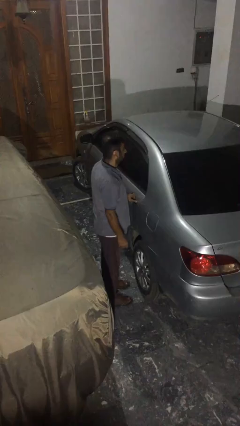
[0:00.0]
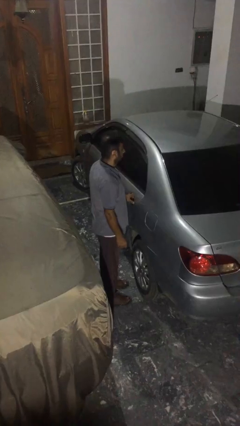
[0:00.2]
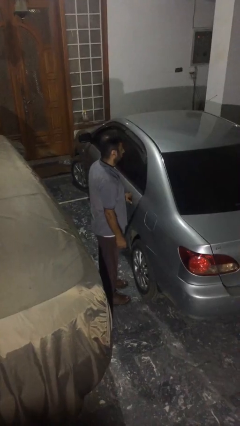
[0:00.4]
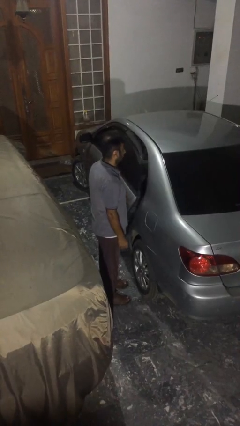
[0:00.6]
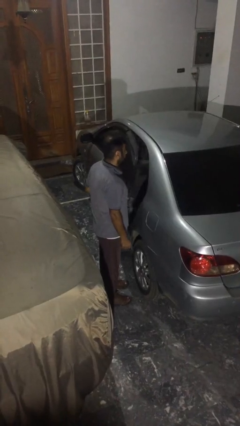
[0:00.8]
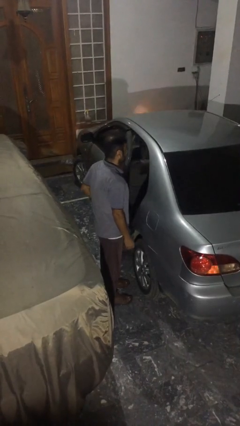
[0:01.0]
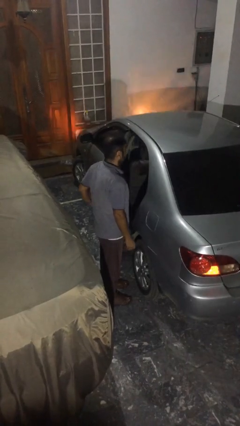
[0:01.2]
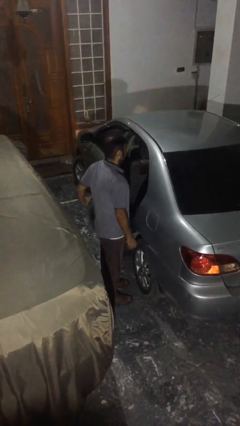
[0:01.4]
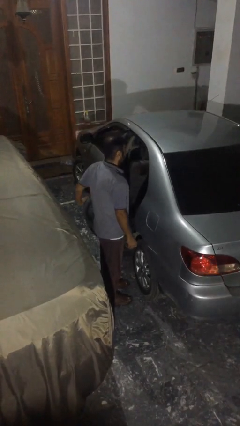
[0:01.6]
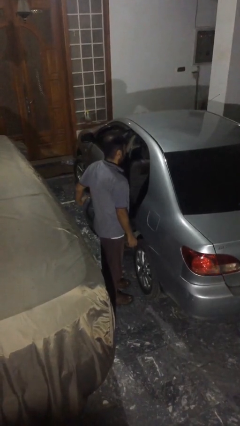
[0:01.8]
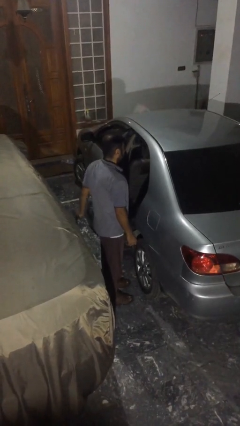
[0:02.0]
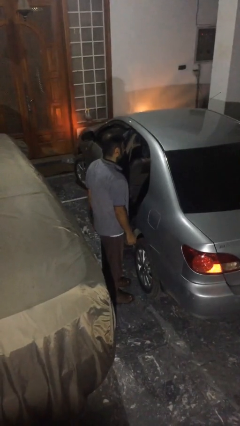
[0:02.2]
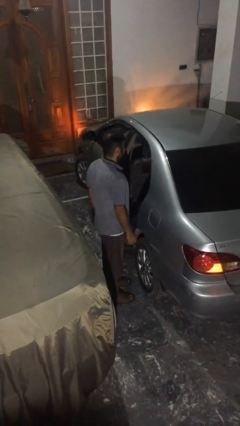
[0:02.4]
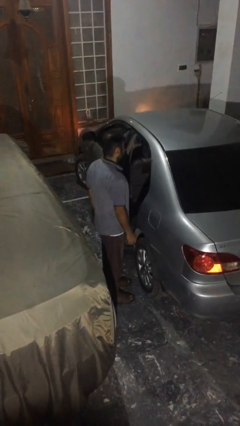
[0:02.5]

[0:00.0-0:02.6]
person opens car door

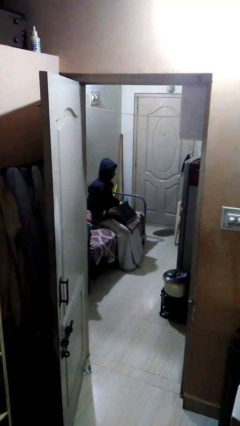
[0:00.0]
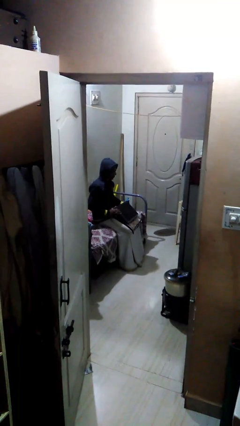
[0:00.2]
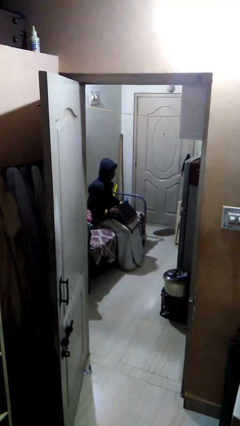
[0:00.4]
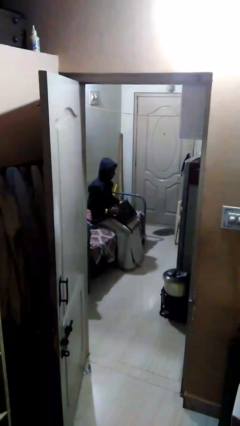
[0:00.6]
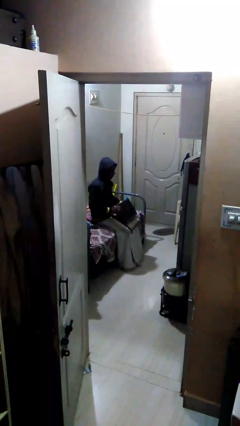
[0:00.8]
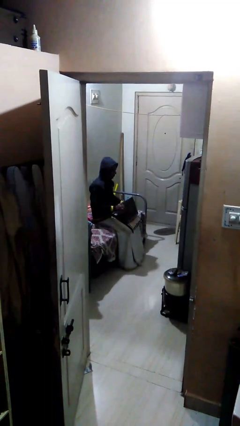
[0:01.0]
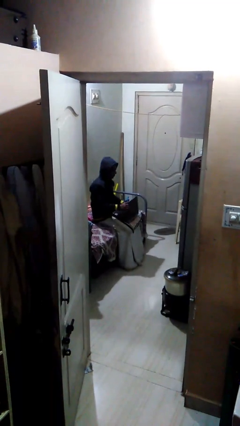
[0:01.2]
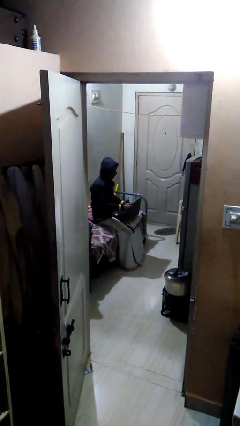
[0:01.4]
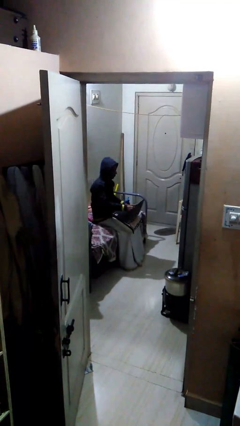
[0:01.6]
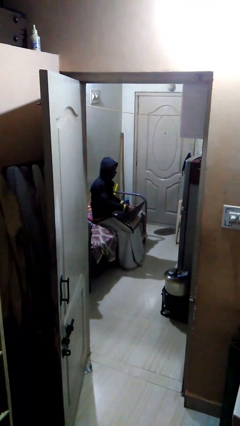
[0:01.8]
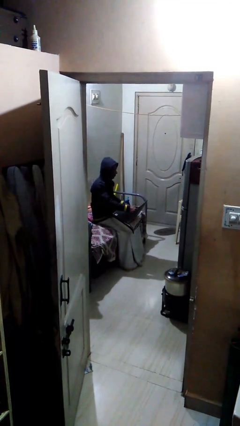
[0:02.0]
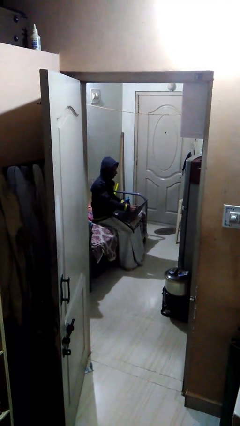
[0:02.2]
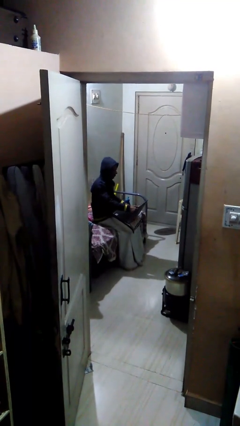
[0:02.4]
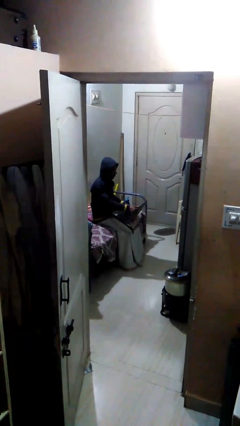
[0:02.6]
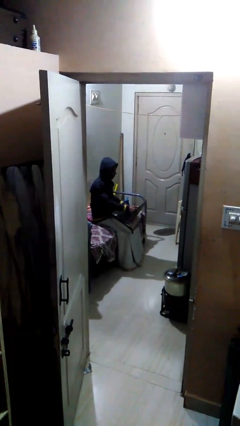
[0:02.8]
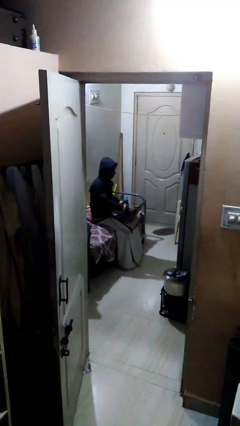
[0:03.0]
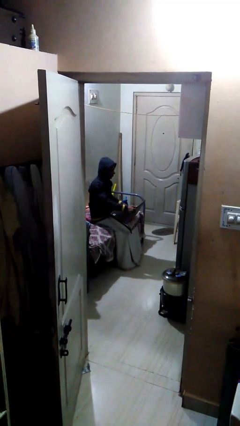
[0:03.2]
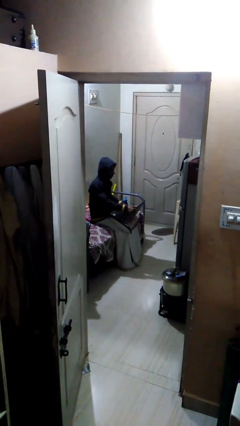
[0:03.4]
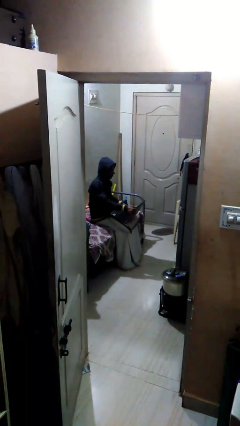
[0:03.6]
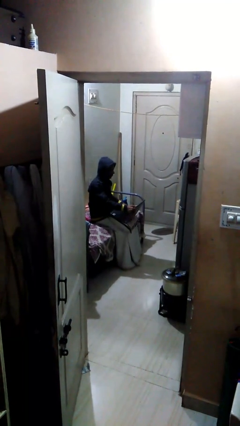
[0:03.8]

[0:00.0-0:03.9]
person interacts with laptop

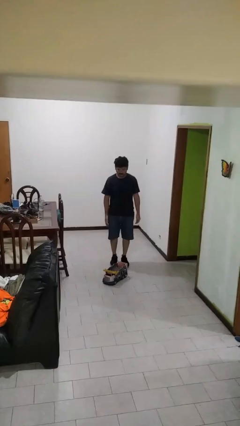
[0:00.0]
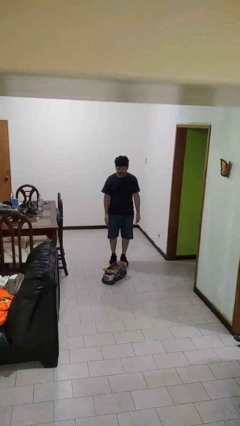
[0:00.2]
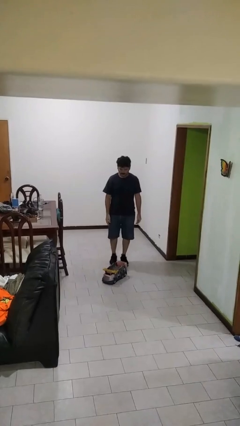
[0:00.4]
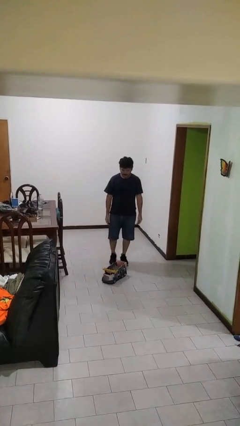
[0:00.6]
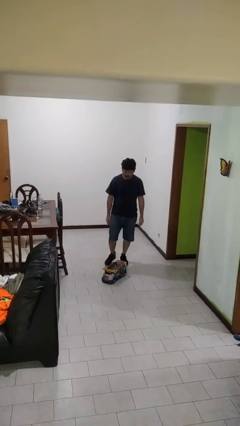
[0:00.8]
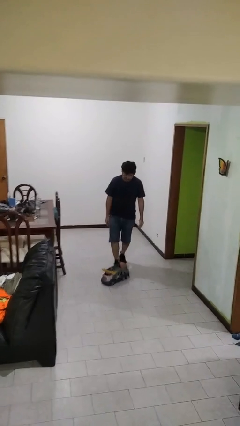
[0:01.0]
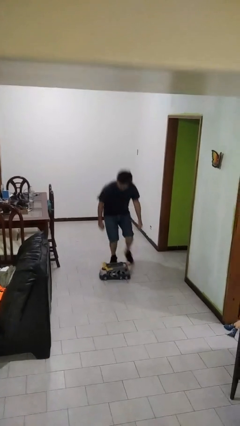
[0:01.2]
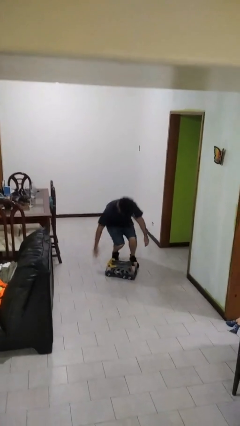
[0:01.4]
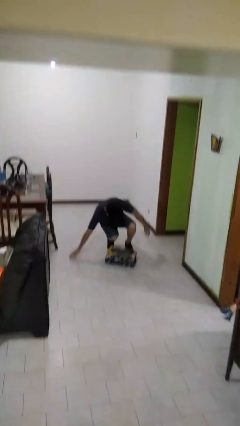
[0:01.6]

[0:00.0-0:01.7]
person trips on object on floor

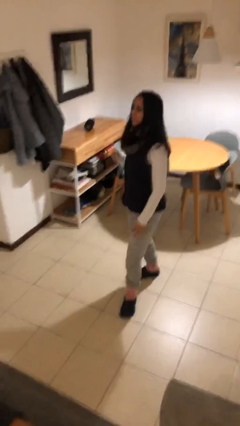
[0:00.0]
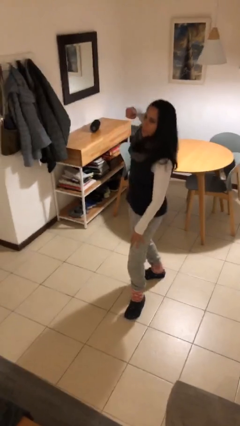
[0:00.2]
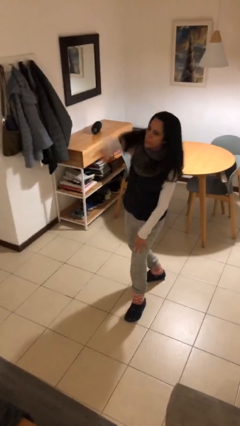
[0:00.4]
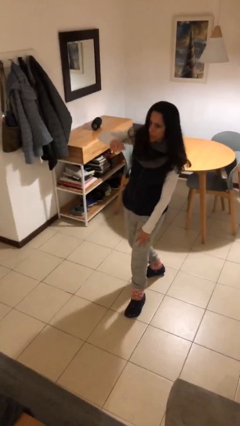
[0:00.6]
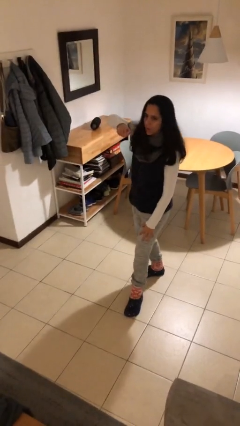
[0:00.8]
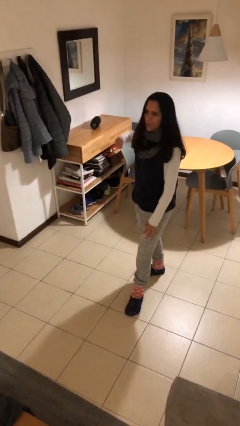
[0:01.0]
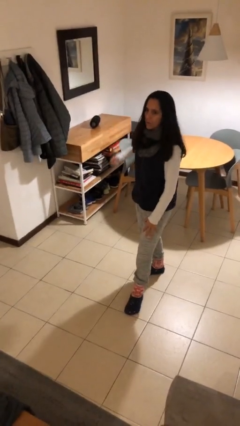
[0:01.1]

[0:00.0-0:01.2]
person punches

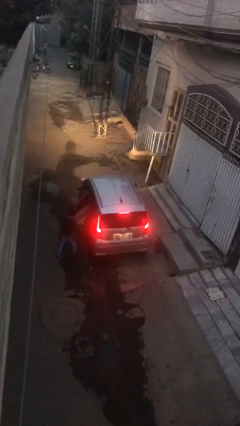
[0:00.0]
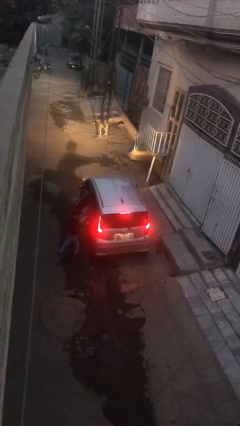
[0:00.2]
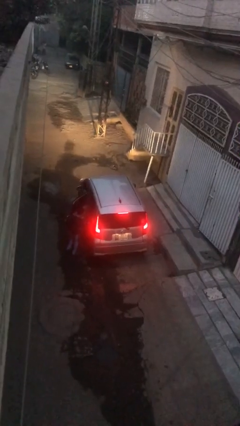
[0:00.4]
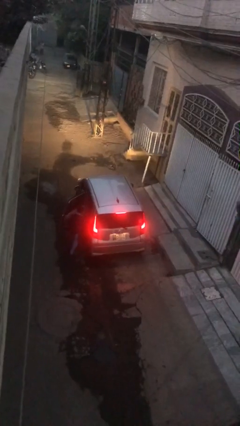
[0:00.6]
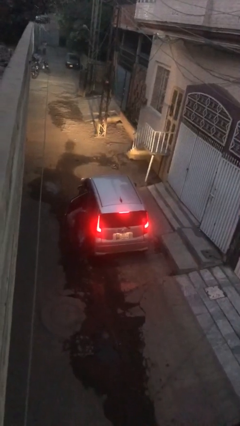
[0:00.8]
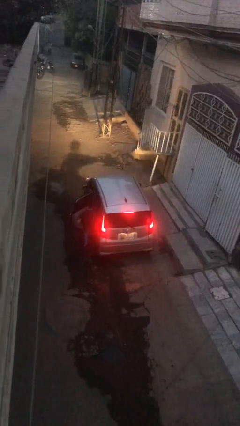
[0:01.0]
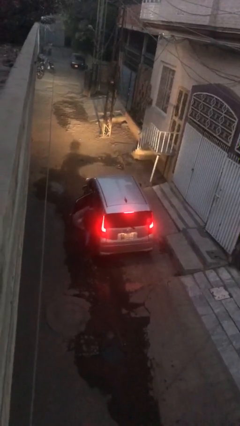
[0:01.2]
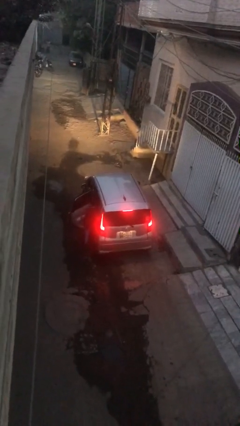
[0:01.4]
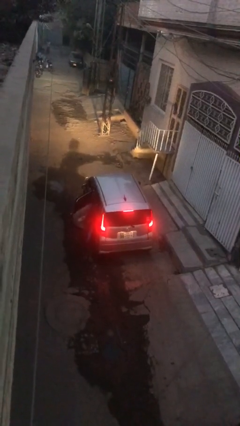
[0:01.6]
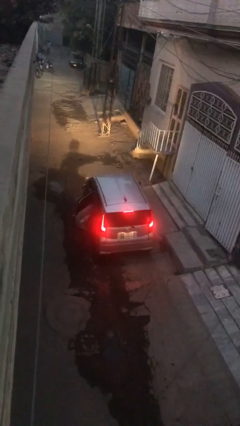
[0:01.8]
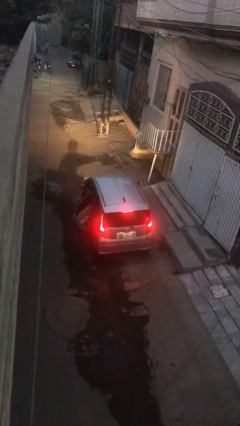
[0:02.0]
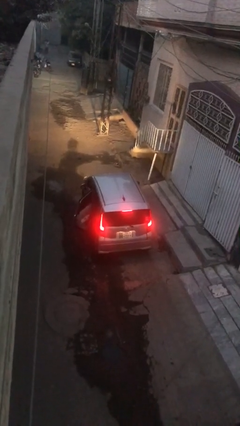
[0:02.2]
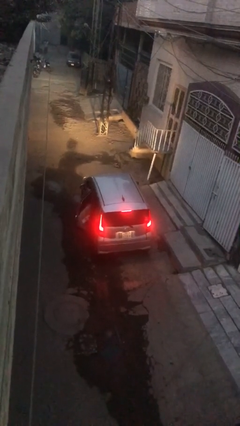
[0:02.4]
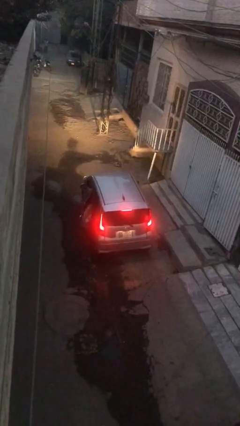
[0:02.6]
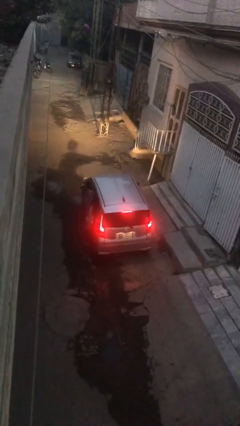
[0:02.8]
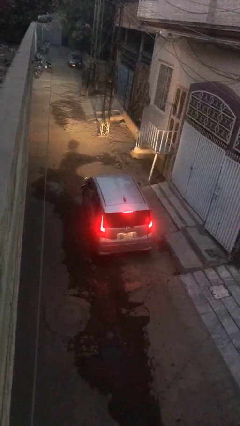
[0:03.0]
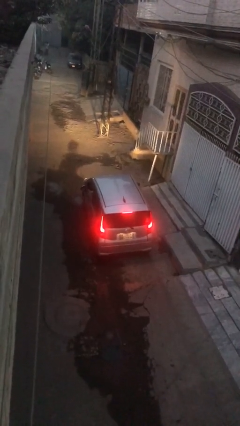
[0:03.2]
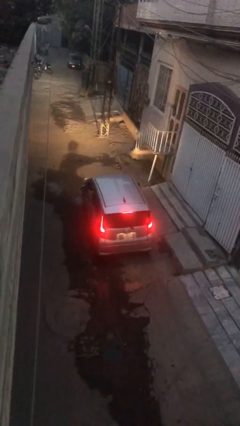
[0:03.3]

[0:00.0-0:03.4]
car picks up person

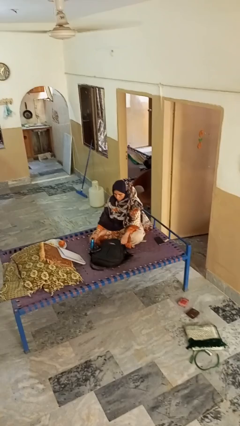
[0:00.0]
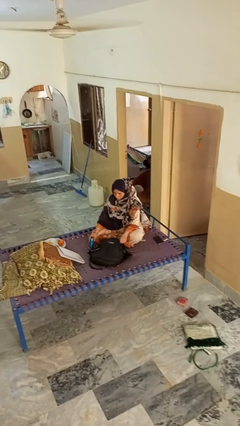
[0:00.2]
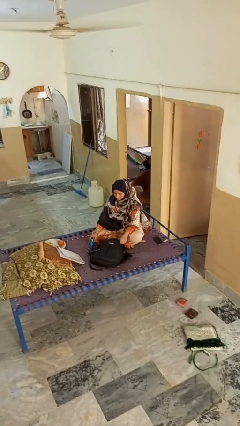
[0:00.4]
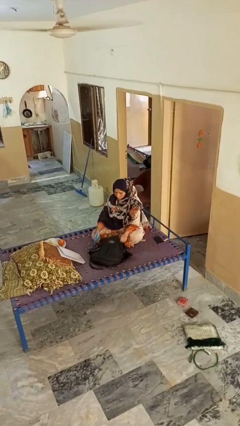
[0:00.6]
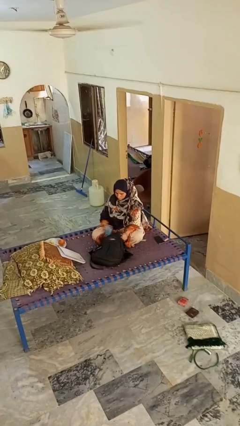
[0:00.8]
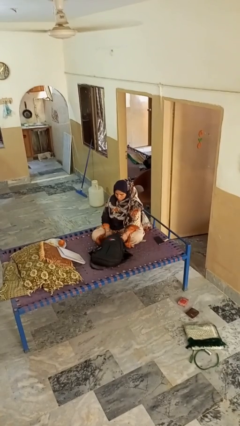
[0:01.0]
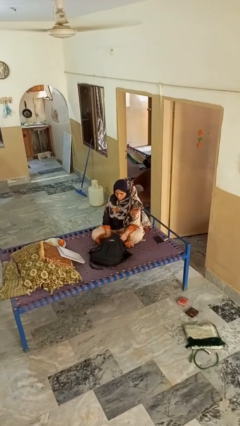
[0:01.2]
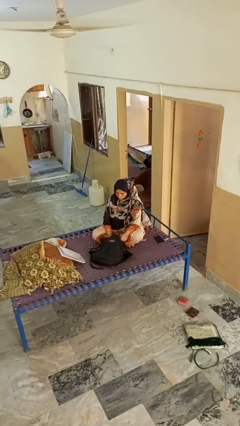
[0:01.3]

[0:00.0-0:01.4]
person puts object into bag

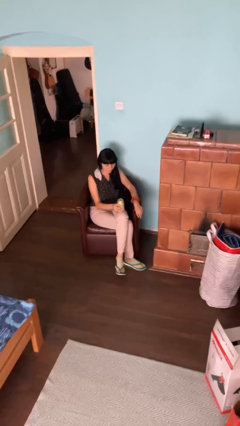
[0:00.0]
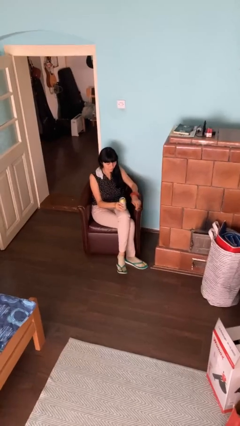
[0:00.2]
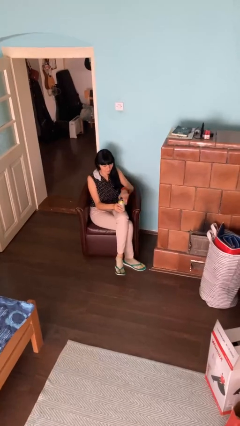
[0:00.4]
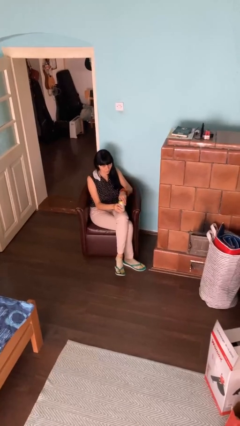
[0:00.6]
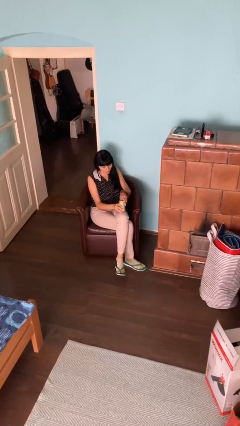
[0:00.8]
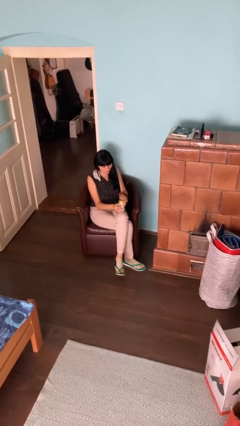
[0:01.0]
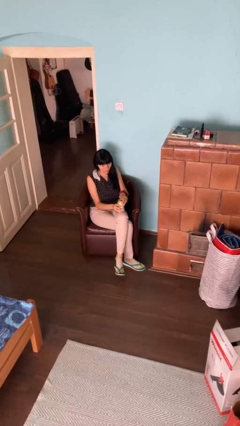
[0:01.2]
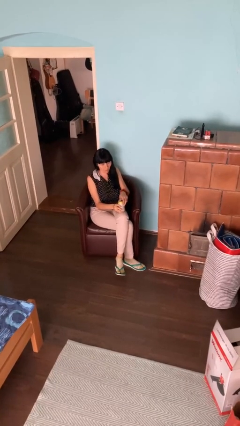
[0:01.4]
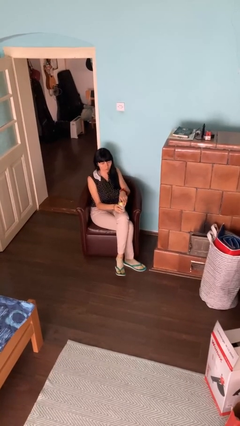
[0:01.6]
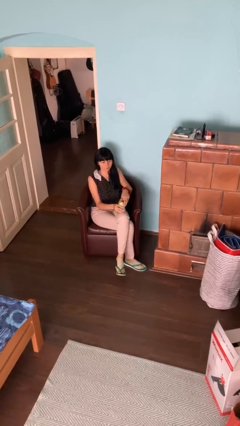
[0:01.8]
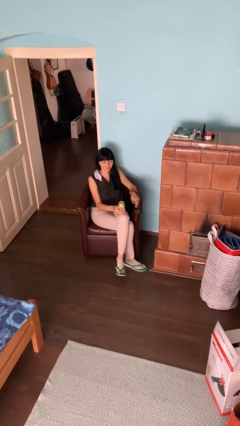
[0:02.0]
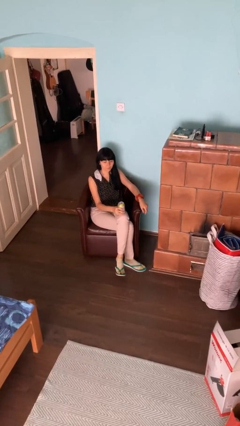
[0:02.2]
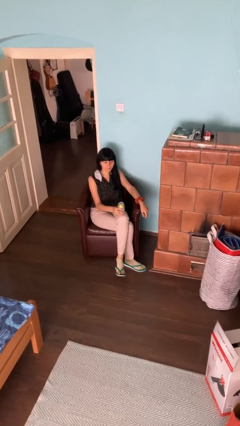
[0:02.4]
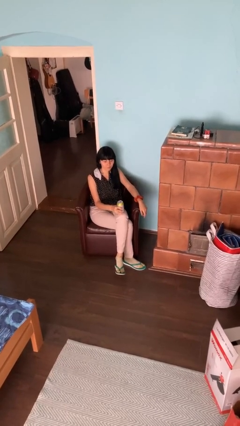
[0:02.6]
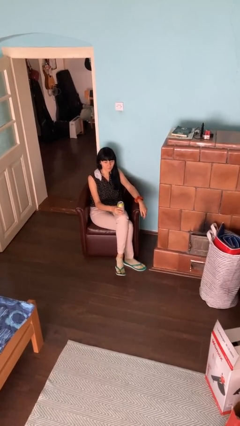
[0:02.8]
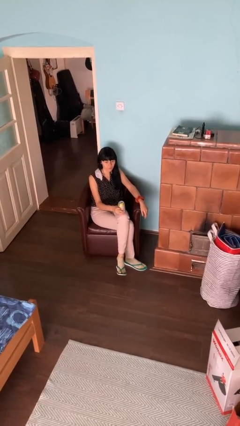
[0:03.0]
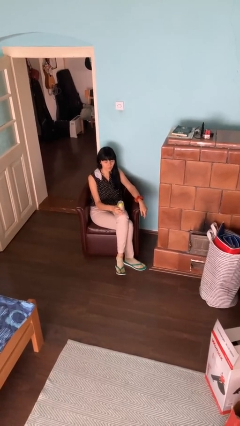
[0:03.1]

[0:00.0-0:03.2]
person opens beverage can
